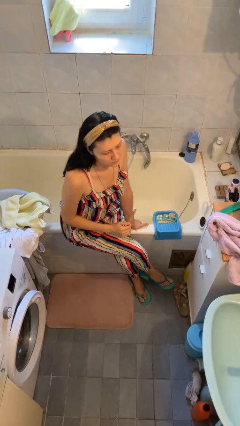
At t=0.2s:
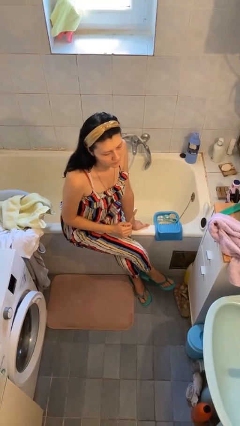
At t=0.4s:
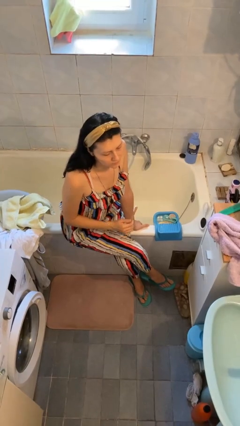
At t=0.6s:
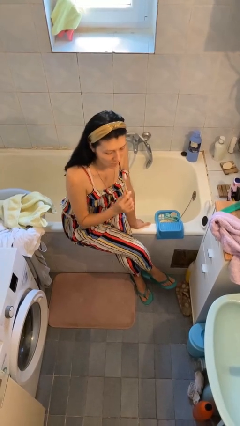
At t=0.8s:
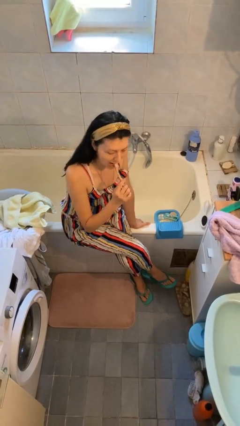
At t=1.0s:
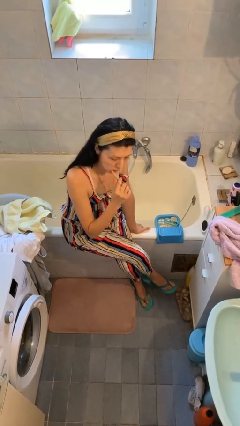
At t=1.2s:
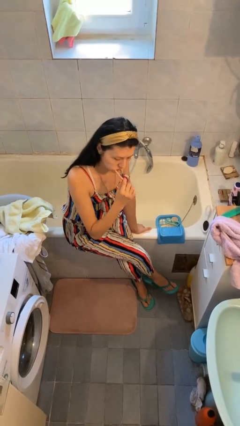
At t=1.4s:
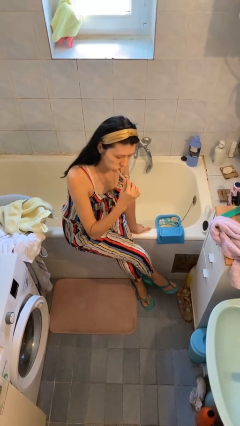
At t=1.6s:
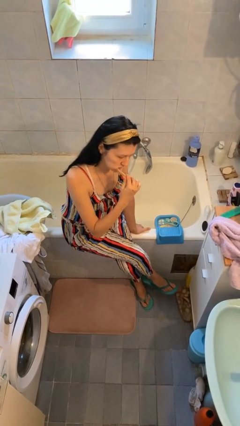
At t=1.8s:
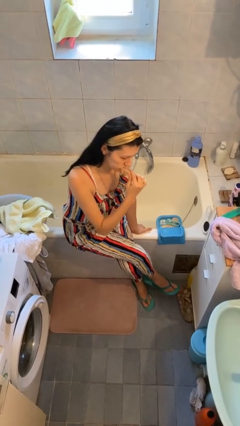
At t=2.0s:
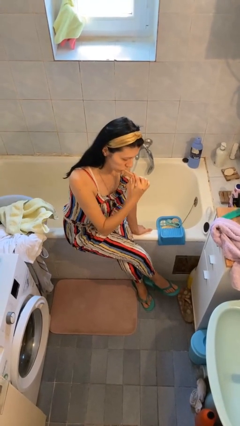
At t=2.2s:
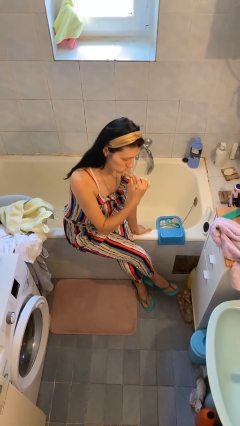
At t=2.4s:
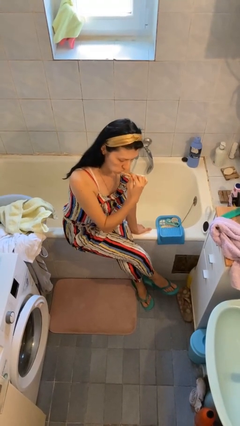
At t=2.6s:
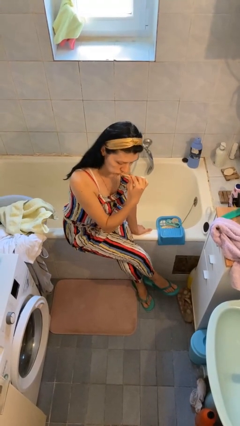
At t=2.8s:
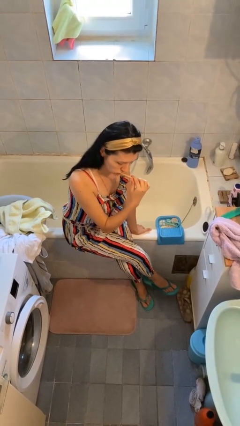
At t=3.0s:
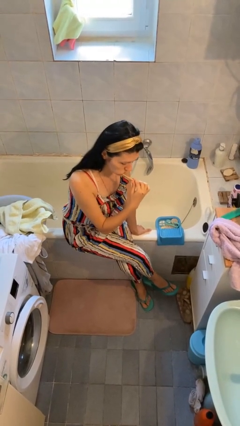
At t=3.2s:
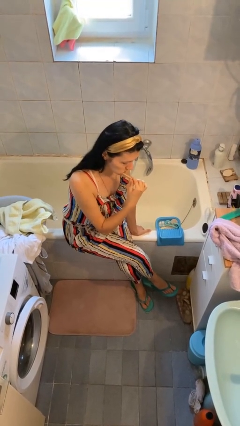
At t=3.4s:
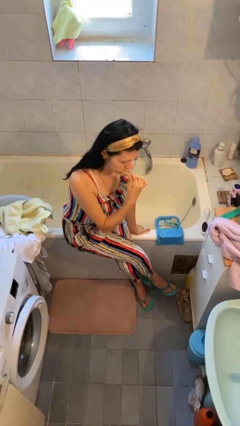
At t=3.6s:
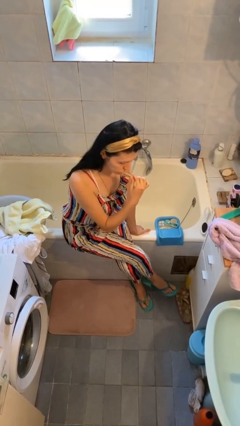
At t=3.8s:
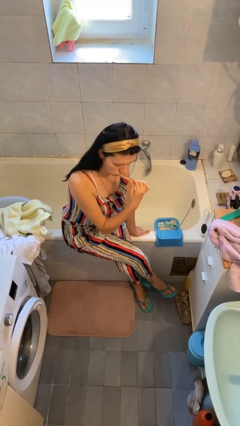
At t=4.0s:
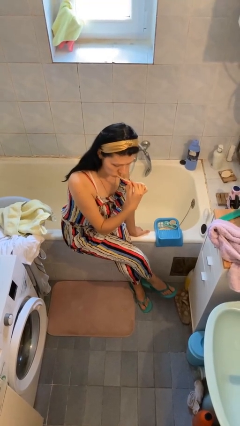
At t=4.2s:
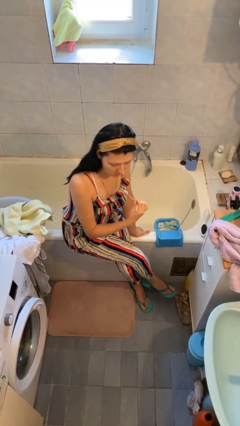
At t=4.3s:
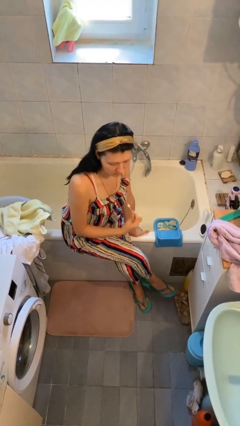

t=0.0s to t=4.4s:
person brushes teeth

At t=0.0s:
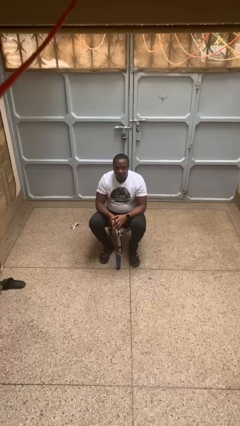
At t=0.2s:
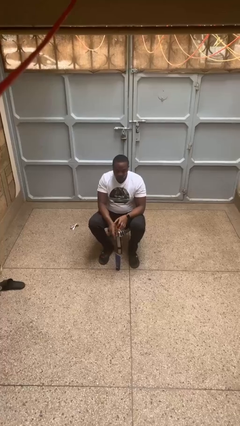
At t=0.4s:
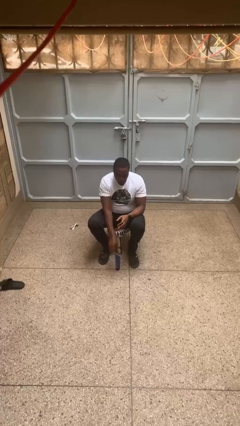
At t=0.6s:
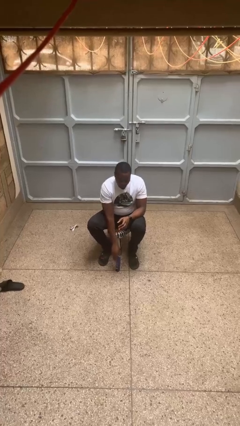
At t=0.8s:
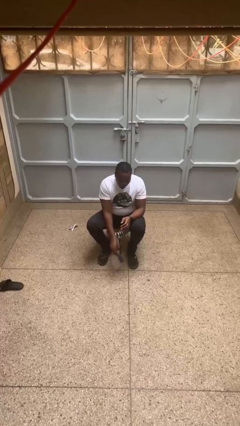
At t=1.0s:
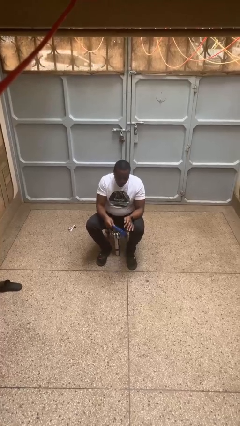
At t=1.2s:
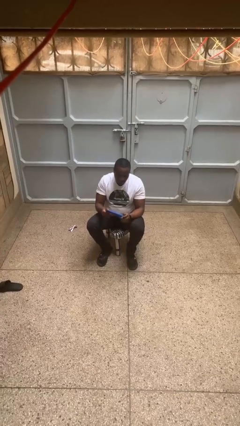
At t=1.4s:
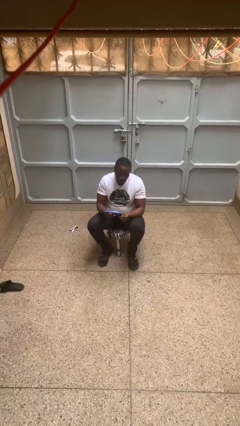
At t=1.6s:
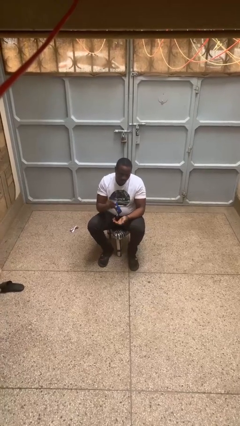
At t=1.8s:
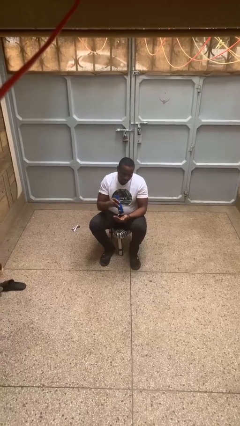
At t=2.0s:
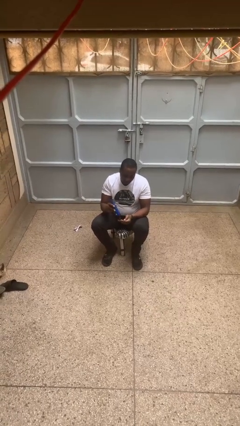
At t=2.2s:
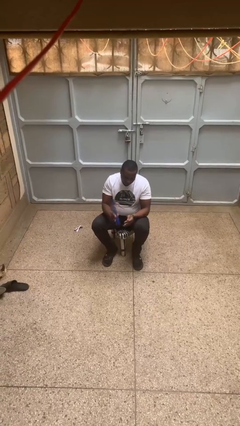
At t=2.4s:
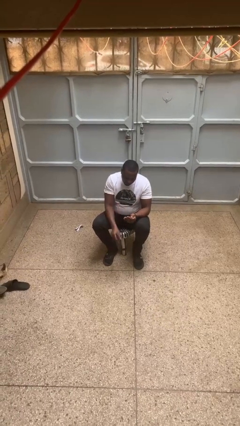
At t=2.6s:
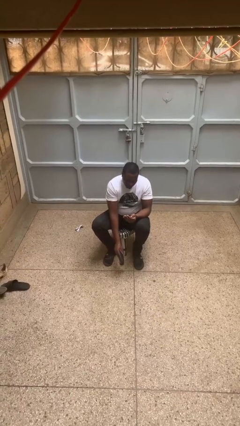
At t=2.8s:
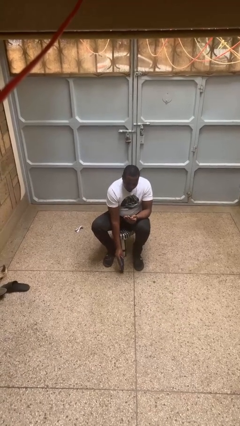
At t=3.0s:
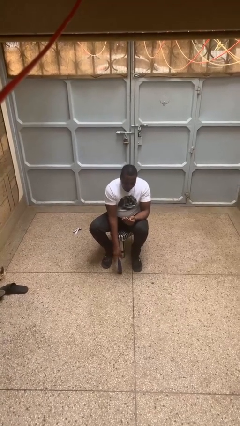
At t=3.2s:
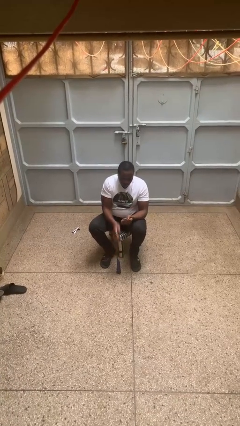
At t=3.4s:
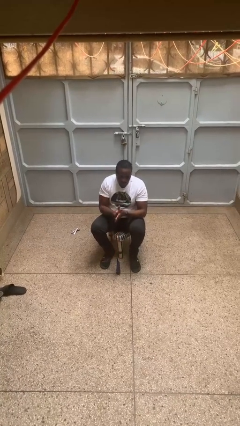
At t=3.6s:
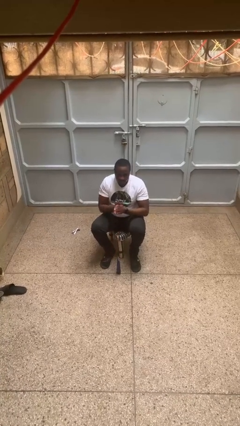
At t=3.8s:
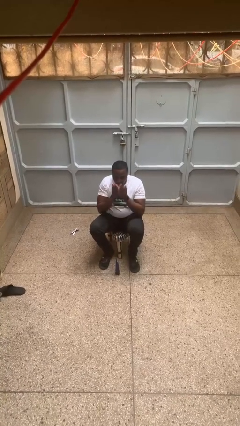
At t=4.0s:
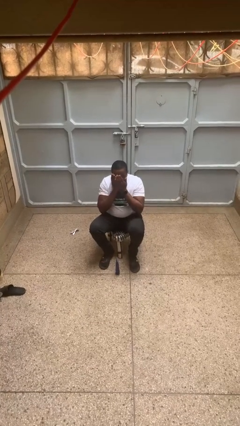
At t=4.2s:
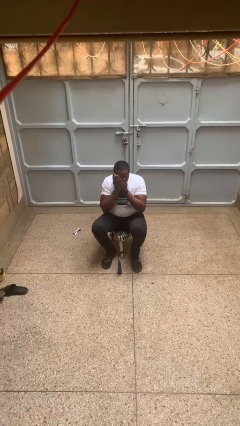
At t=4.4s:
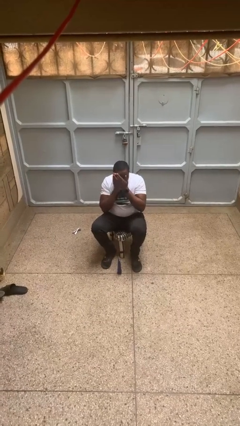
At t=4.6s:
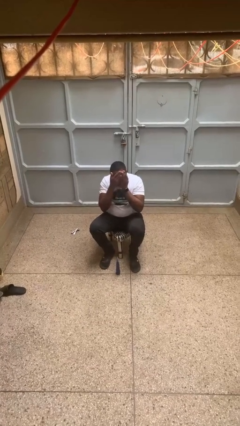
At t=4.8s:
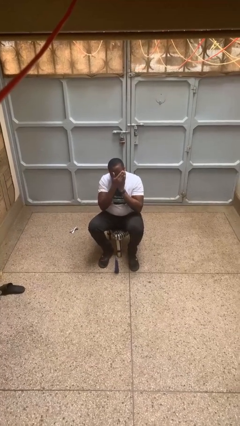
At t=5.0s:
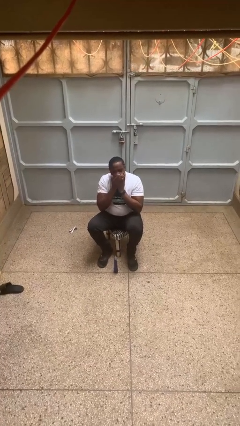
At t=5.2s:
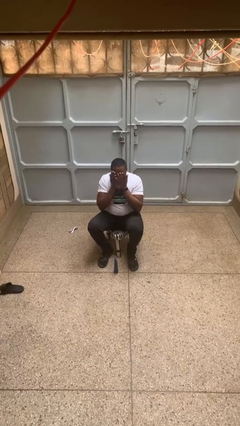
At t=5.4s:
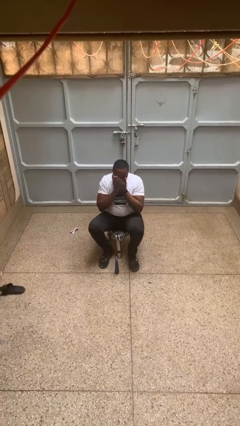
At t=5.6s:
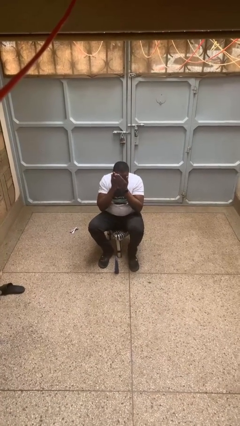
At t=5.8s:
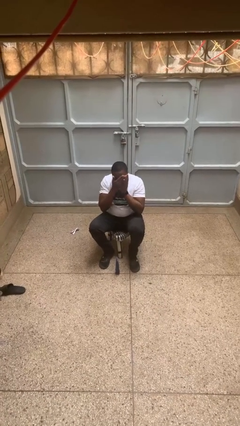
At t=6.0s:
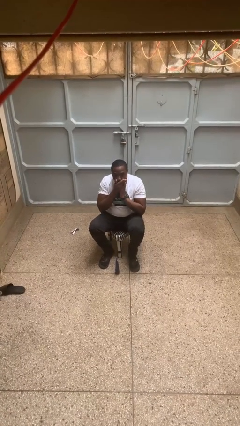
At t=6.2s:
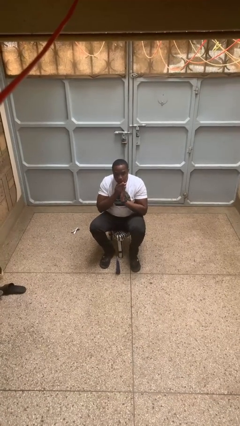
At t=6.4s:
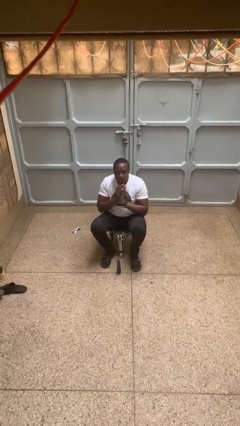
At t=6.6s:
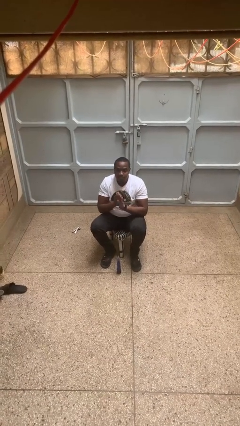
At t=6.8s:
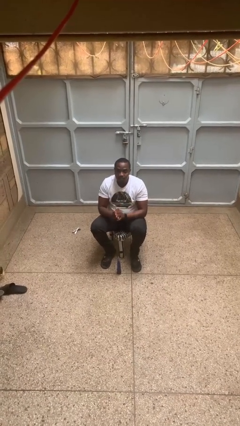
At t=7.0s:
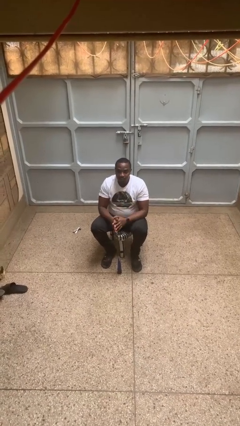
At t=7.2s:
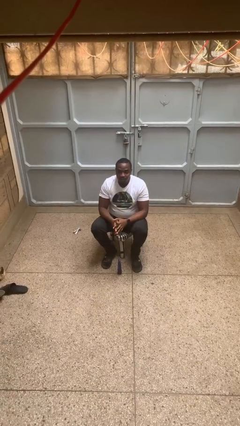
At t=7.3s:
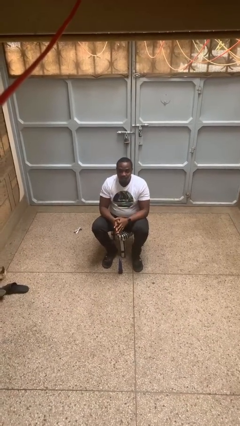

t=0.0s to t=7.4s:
person applies facial moisturizer

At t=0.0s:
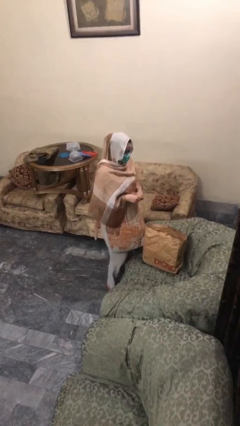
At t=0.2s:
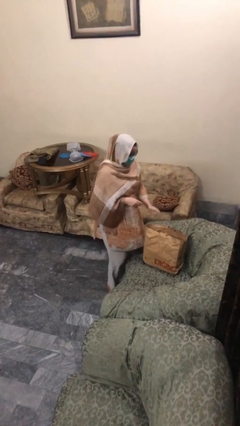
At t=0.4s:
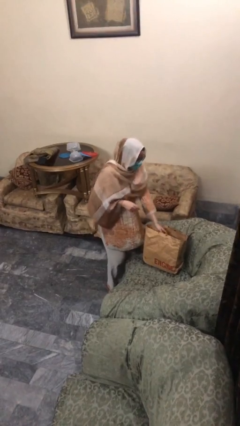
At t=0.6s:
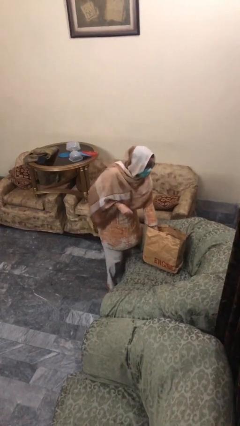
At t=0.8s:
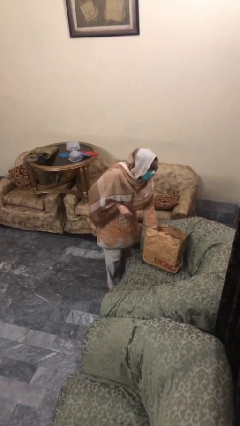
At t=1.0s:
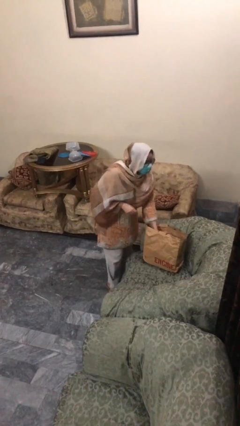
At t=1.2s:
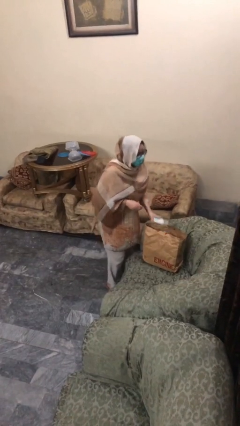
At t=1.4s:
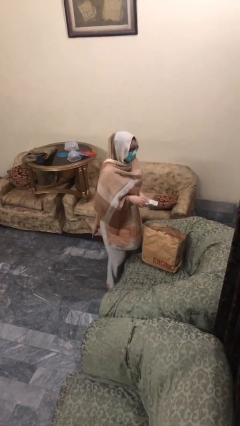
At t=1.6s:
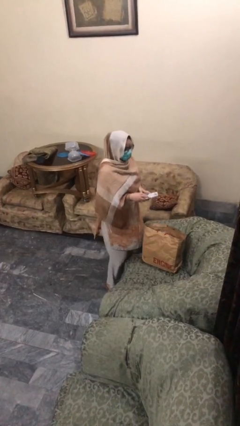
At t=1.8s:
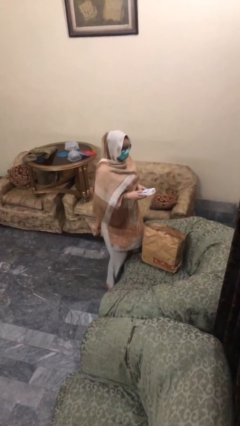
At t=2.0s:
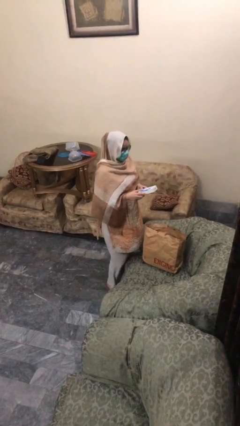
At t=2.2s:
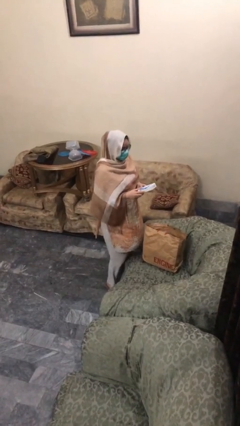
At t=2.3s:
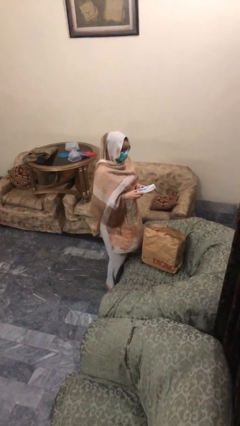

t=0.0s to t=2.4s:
person takes object from bag

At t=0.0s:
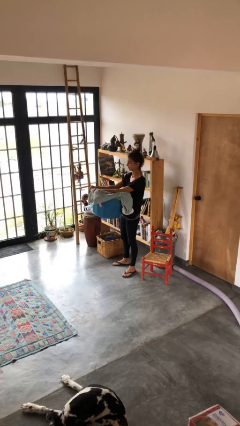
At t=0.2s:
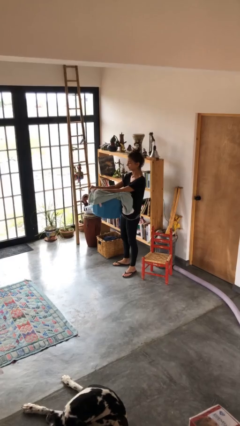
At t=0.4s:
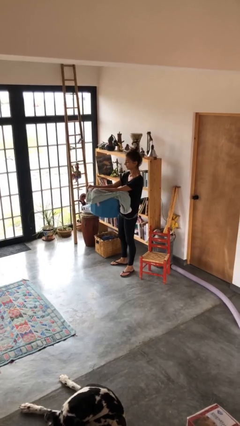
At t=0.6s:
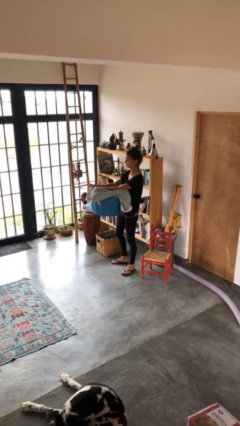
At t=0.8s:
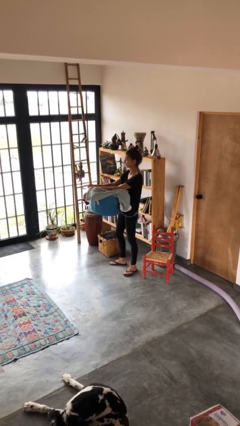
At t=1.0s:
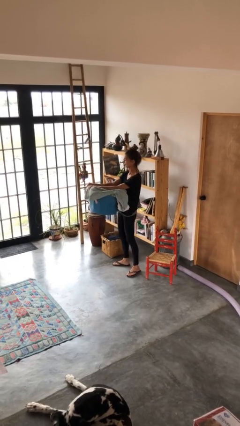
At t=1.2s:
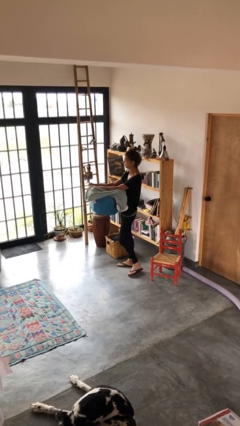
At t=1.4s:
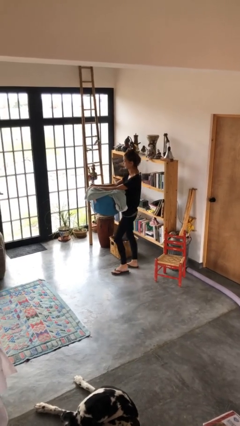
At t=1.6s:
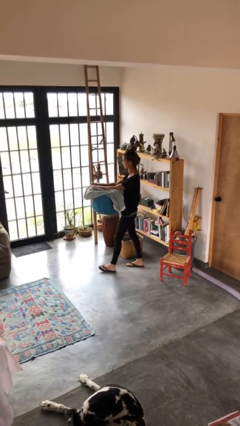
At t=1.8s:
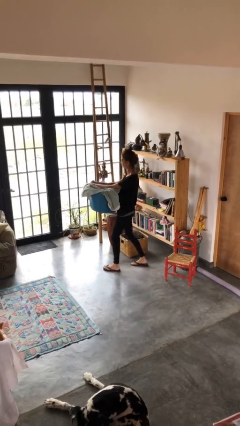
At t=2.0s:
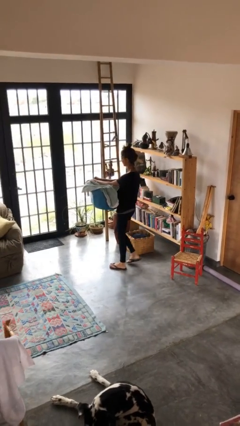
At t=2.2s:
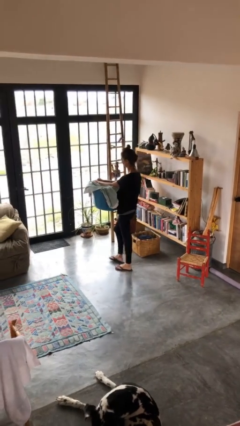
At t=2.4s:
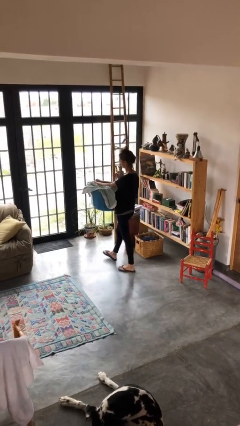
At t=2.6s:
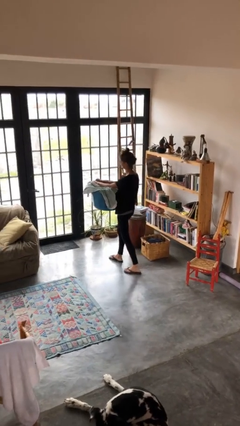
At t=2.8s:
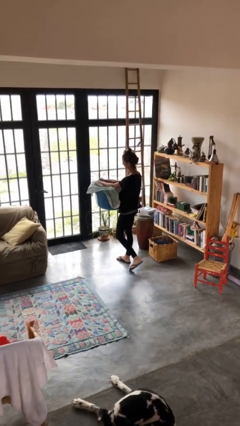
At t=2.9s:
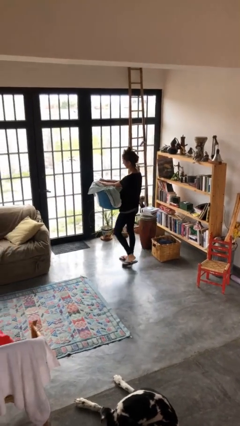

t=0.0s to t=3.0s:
person carries laundry basket

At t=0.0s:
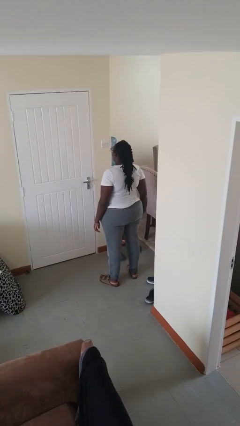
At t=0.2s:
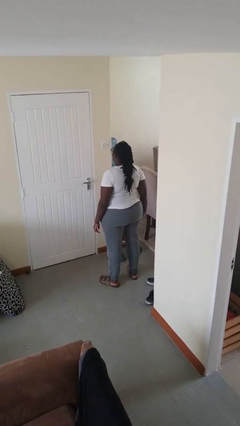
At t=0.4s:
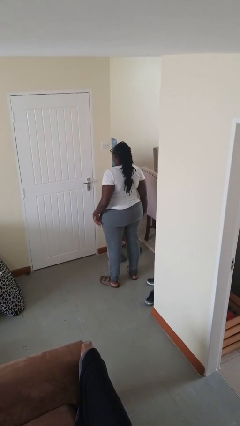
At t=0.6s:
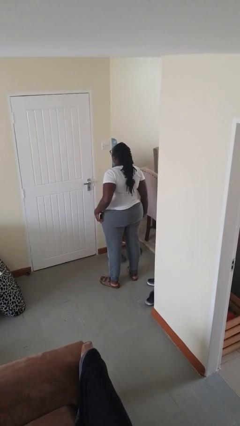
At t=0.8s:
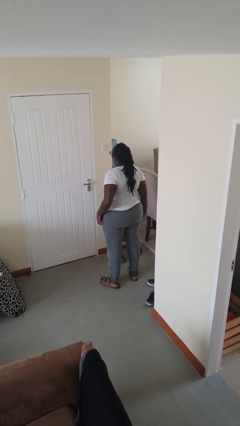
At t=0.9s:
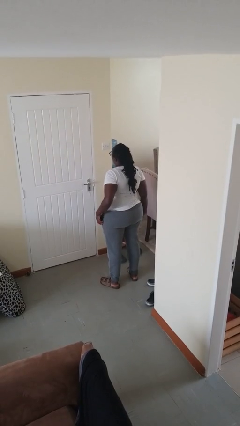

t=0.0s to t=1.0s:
person takes phone from pocket
